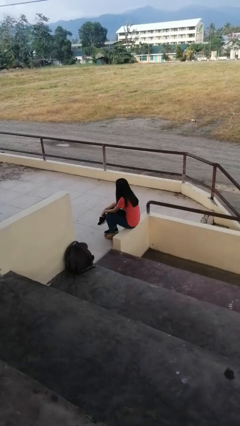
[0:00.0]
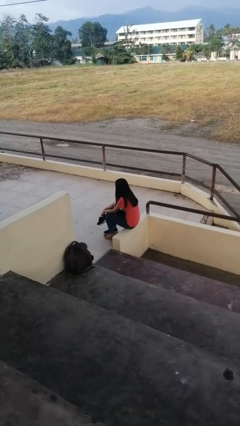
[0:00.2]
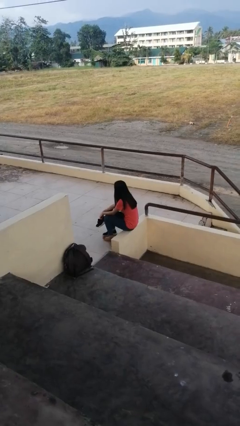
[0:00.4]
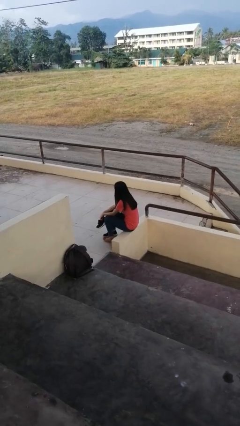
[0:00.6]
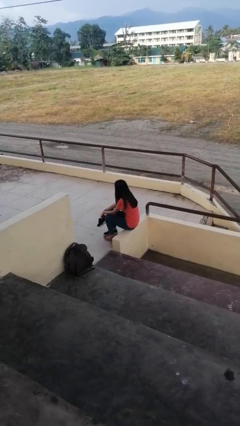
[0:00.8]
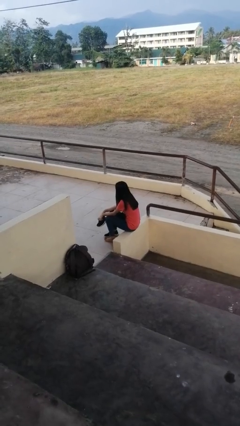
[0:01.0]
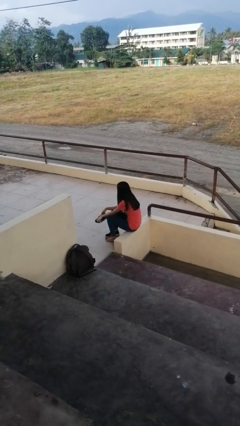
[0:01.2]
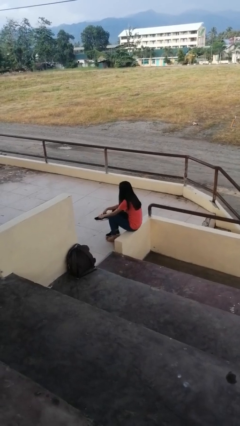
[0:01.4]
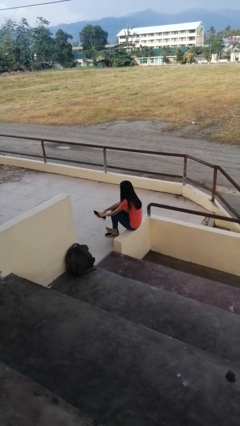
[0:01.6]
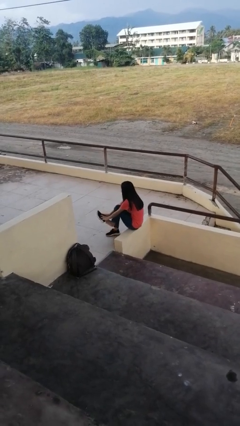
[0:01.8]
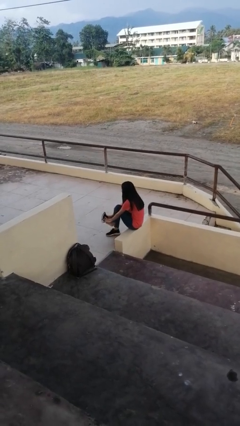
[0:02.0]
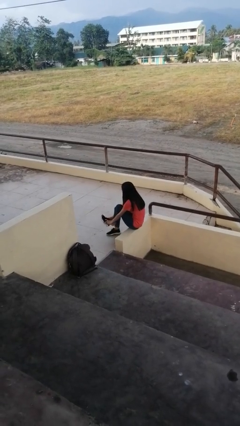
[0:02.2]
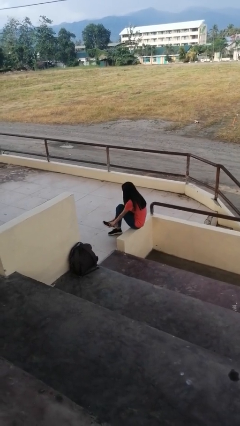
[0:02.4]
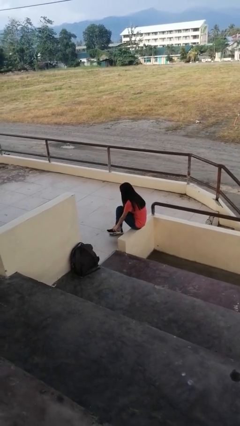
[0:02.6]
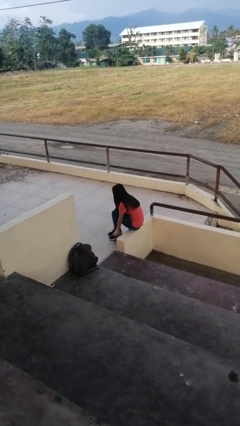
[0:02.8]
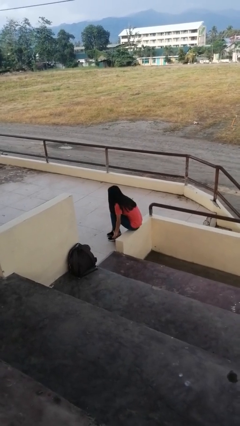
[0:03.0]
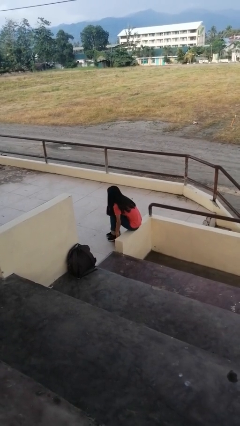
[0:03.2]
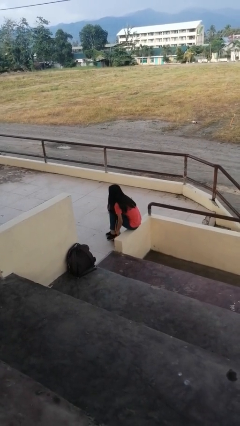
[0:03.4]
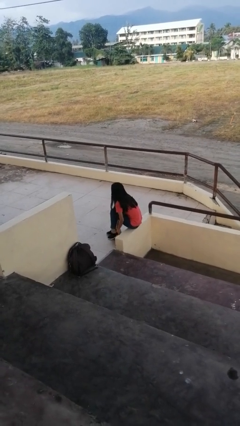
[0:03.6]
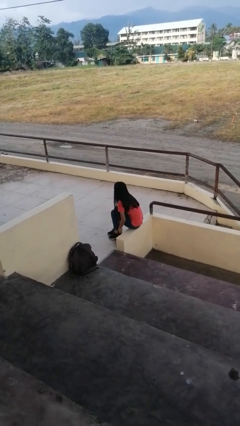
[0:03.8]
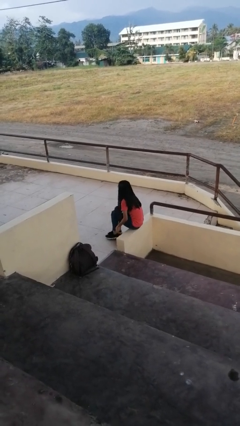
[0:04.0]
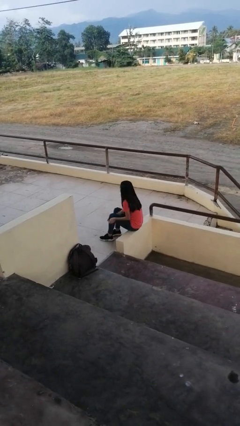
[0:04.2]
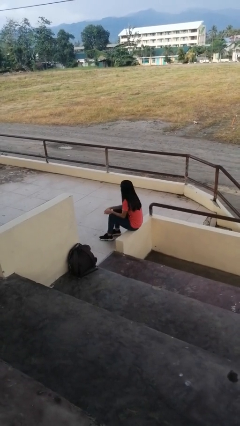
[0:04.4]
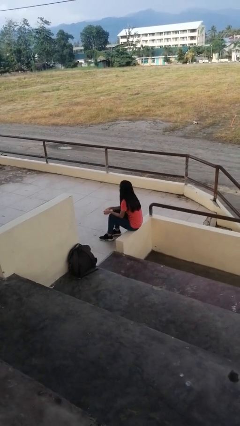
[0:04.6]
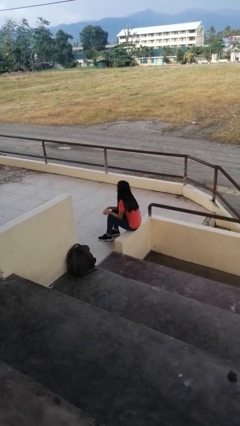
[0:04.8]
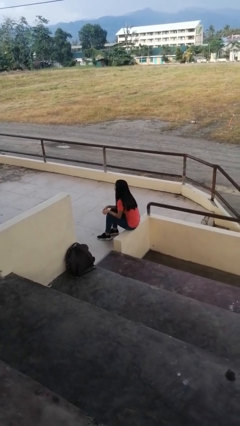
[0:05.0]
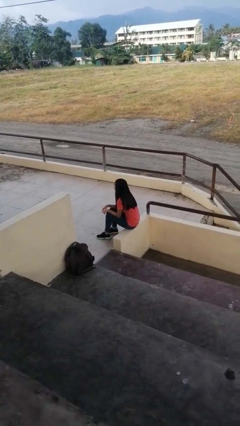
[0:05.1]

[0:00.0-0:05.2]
person puts on shoes

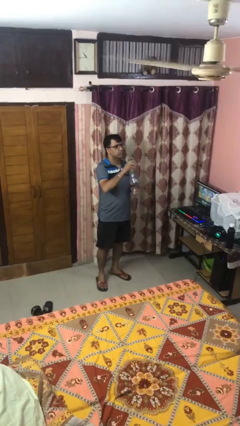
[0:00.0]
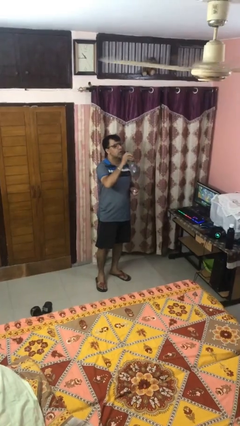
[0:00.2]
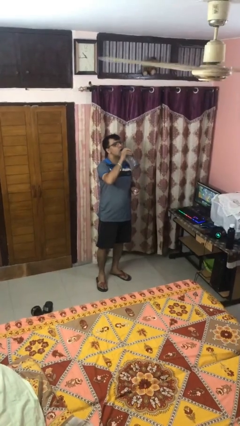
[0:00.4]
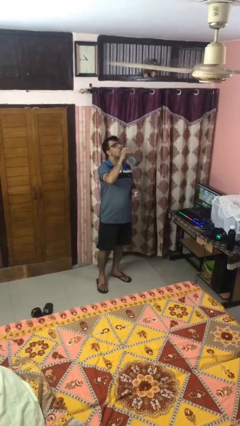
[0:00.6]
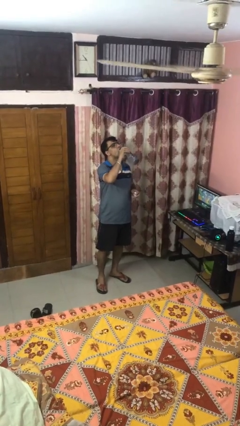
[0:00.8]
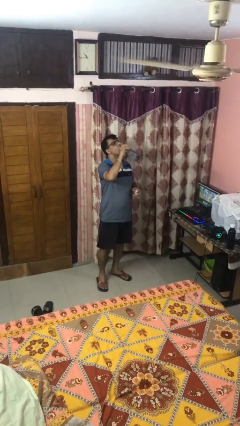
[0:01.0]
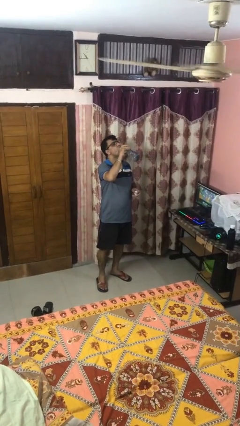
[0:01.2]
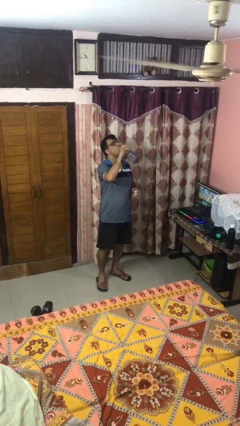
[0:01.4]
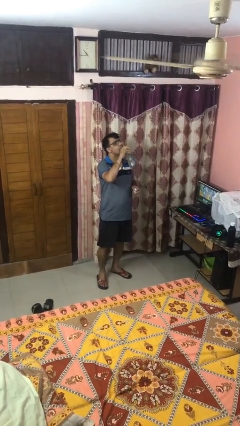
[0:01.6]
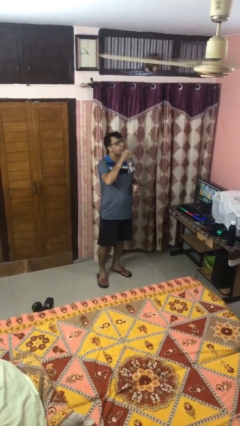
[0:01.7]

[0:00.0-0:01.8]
person drinks from bottle

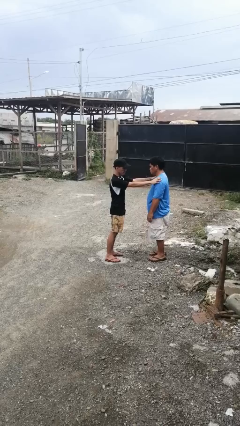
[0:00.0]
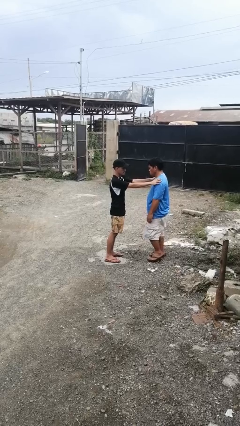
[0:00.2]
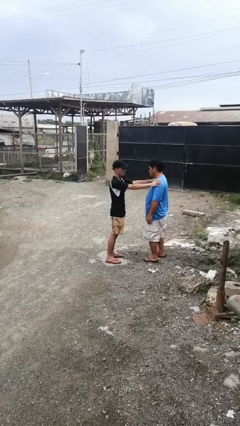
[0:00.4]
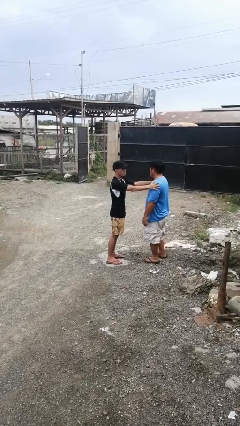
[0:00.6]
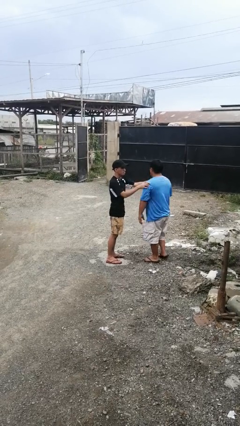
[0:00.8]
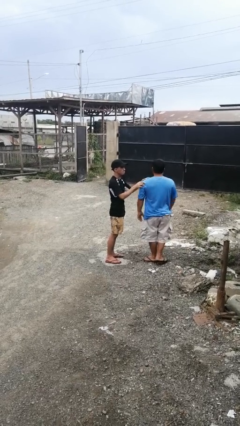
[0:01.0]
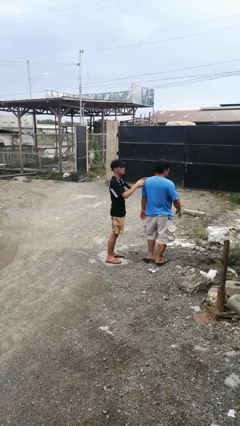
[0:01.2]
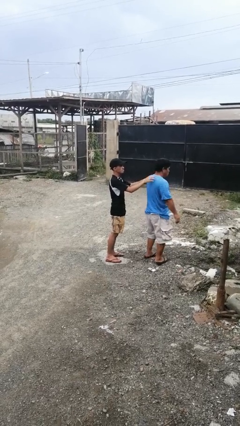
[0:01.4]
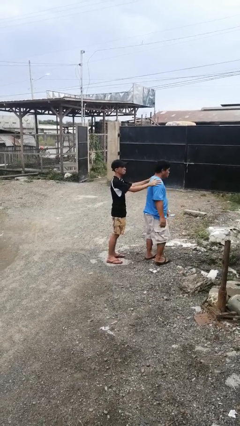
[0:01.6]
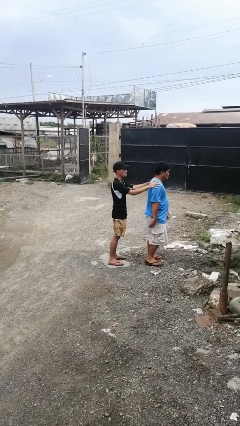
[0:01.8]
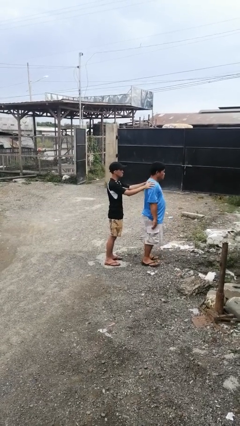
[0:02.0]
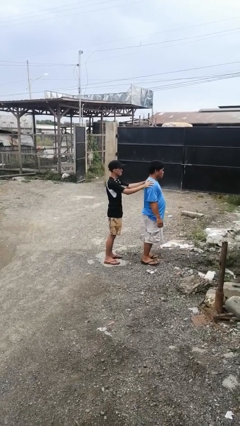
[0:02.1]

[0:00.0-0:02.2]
person spins person around

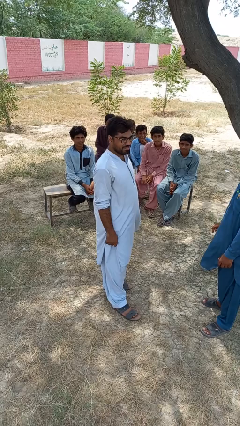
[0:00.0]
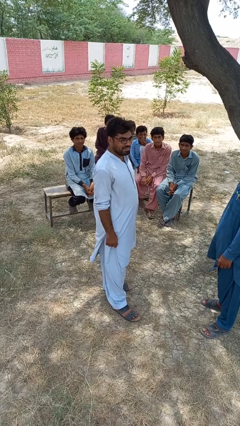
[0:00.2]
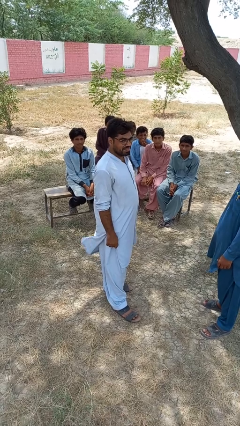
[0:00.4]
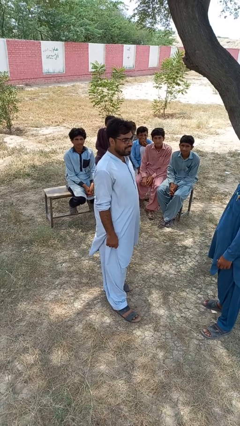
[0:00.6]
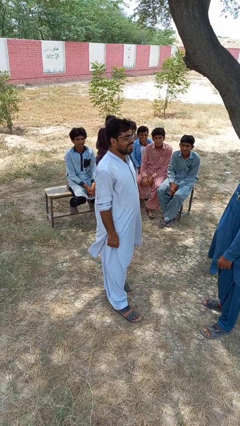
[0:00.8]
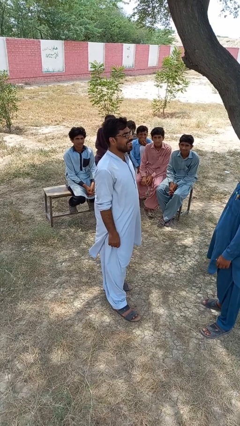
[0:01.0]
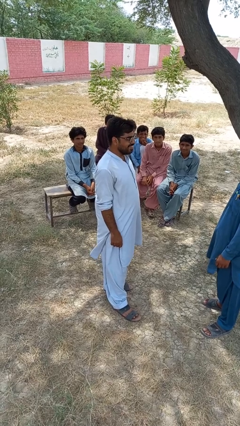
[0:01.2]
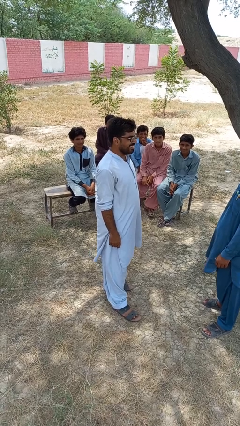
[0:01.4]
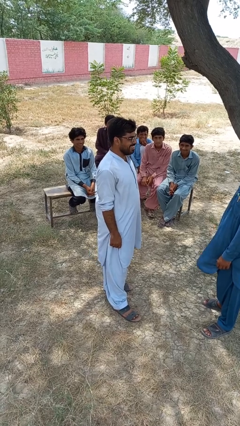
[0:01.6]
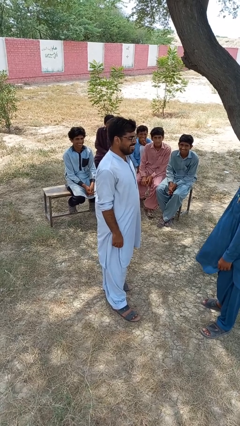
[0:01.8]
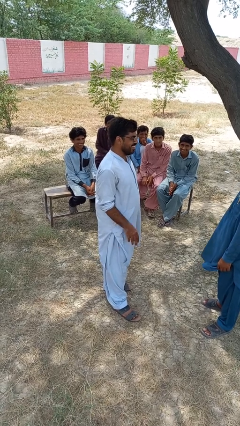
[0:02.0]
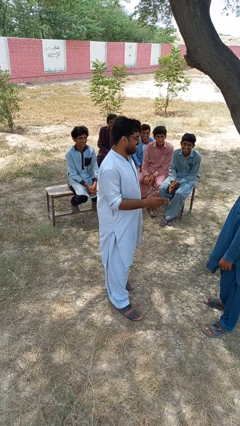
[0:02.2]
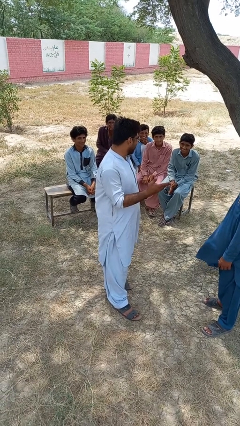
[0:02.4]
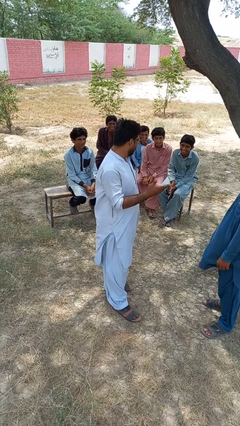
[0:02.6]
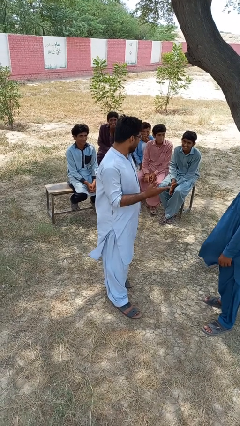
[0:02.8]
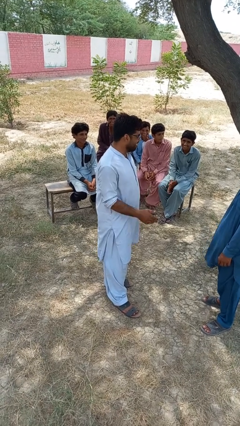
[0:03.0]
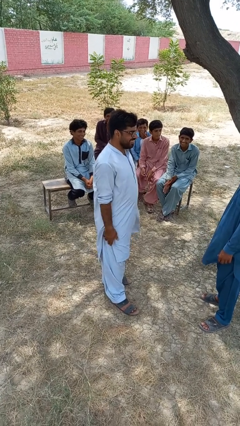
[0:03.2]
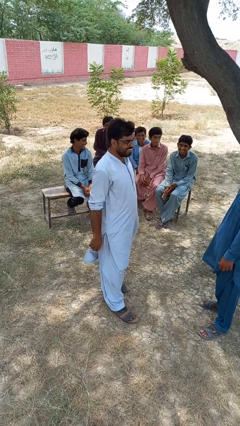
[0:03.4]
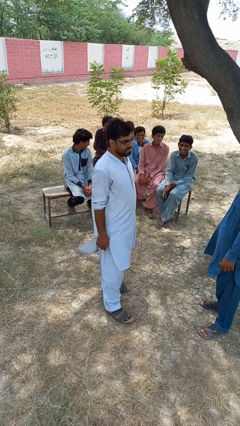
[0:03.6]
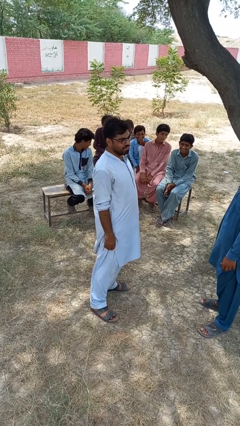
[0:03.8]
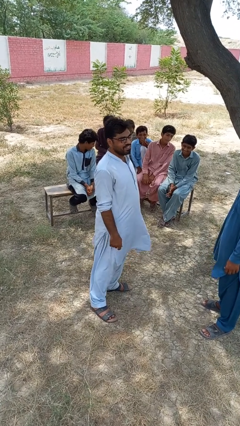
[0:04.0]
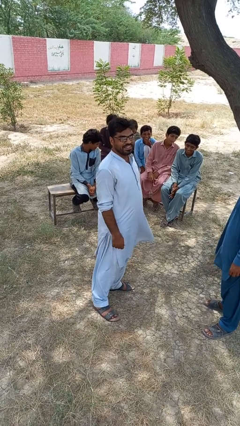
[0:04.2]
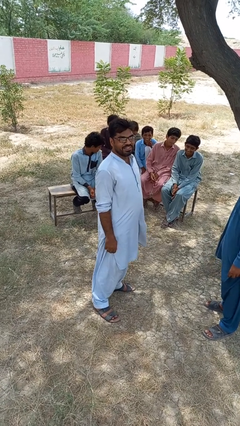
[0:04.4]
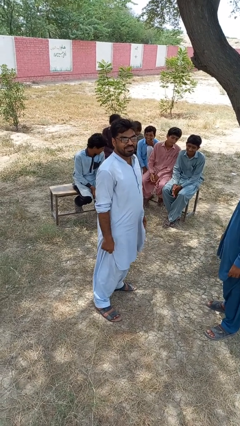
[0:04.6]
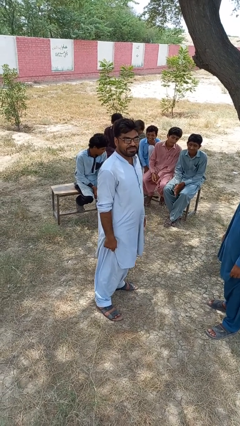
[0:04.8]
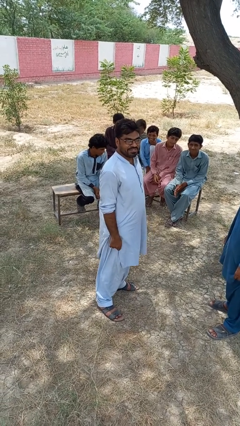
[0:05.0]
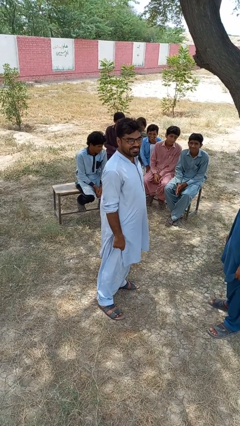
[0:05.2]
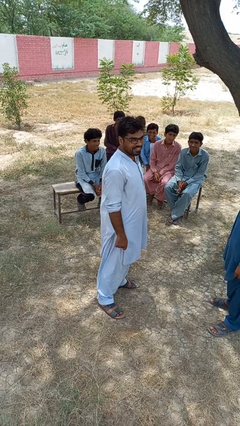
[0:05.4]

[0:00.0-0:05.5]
person laughs with person

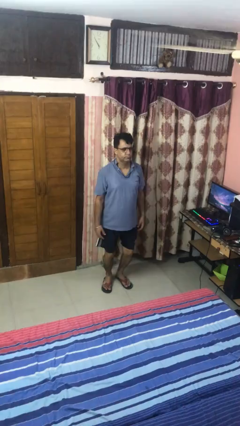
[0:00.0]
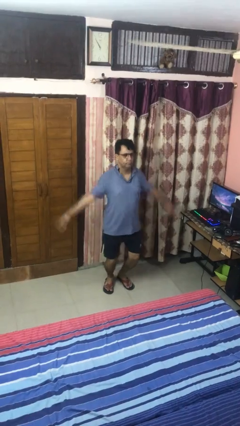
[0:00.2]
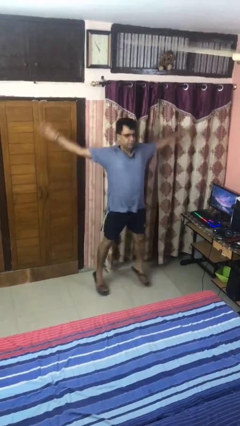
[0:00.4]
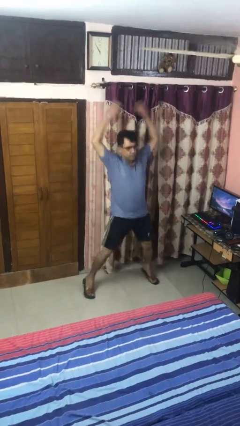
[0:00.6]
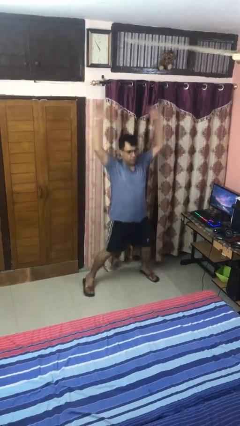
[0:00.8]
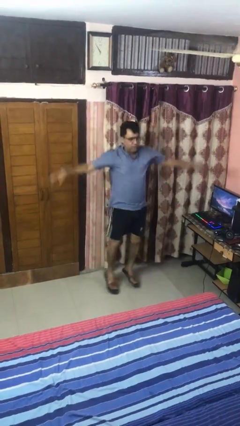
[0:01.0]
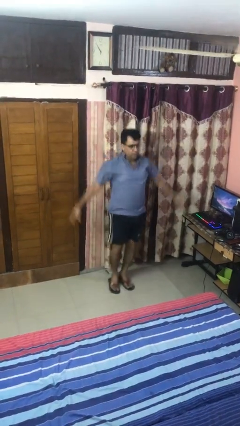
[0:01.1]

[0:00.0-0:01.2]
person exercises with jumping jacks

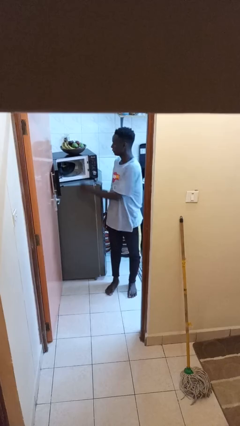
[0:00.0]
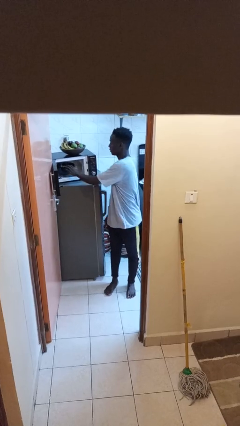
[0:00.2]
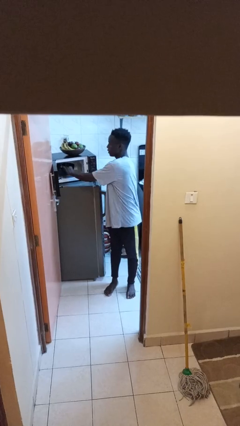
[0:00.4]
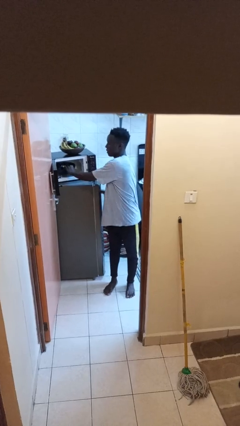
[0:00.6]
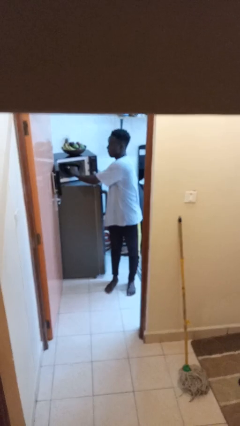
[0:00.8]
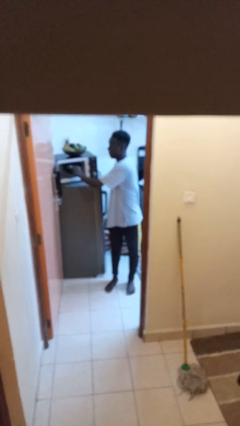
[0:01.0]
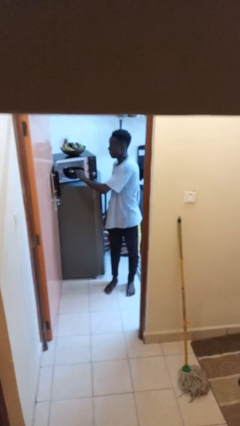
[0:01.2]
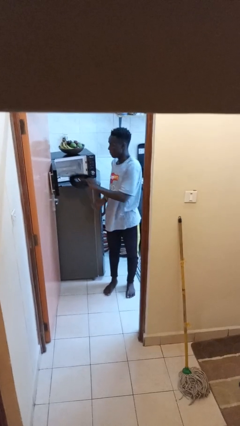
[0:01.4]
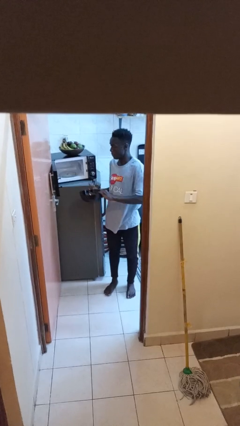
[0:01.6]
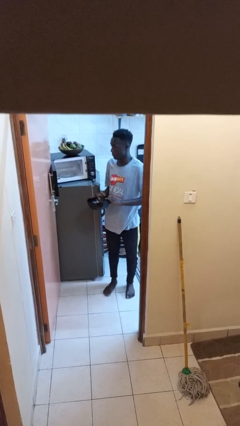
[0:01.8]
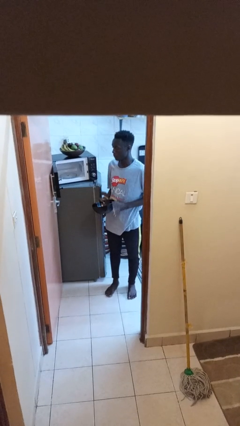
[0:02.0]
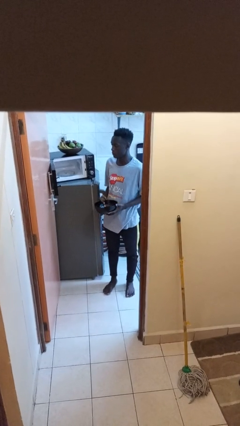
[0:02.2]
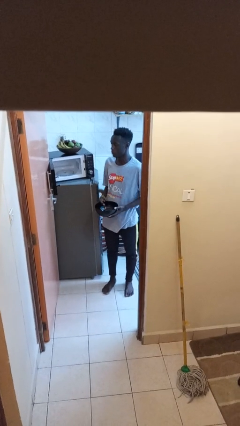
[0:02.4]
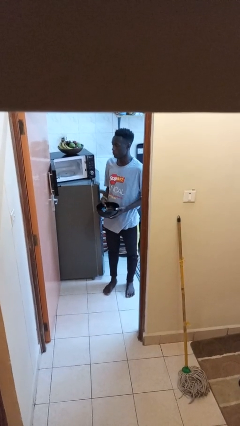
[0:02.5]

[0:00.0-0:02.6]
person takes object from microwave
